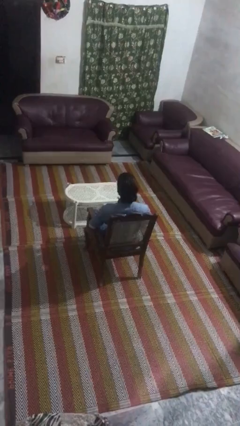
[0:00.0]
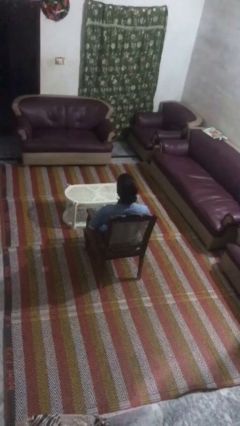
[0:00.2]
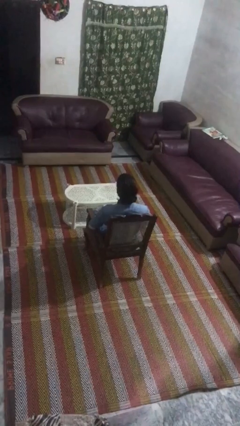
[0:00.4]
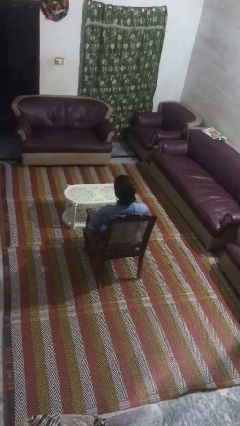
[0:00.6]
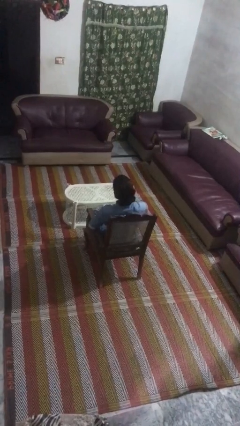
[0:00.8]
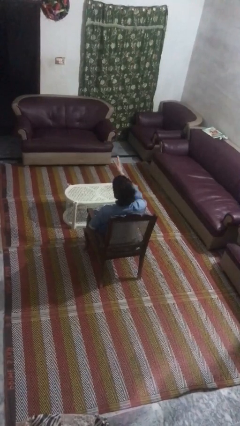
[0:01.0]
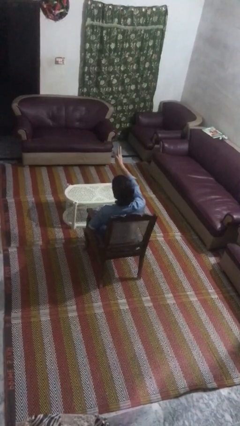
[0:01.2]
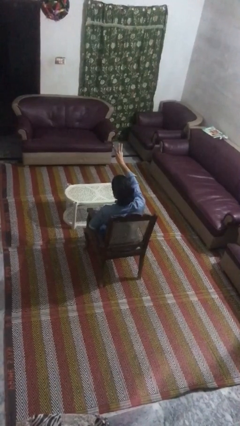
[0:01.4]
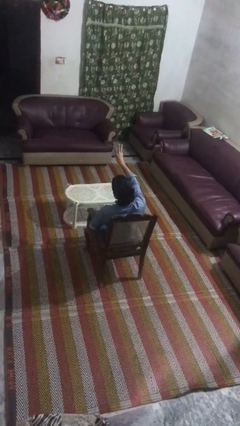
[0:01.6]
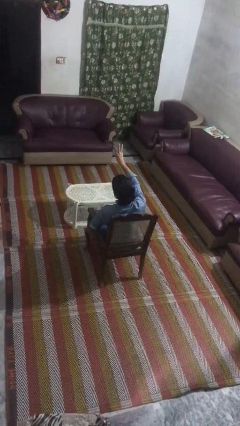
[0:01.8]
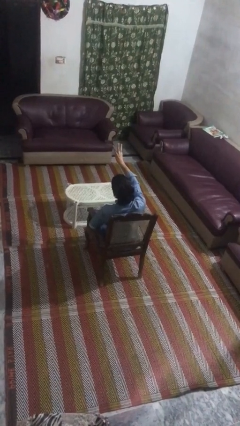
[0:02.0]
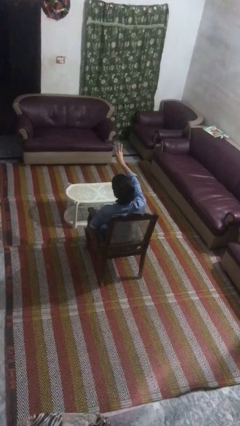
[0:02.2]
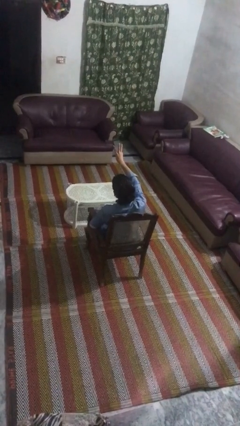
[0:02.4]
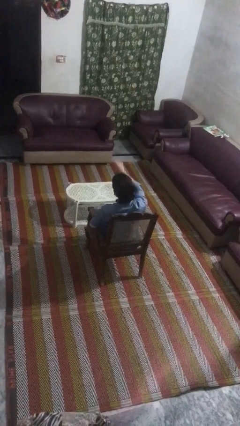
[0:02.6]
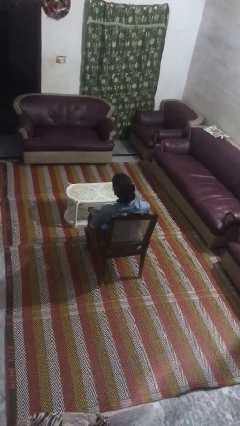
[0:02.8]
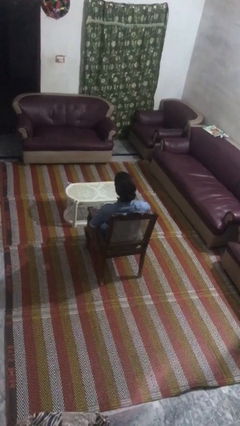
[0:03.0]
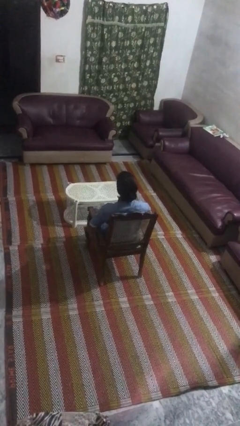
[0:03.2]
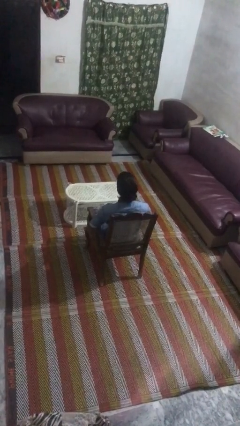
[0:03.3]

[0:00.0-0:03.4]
person gestures number three

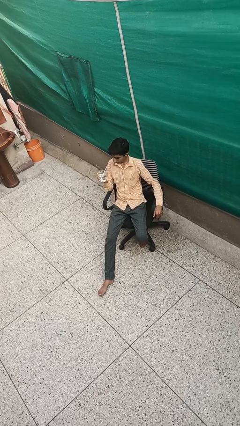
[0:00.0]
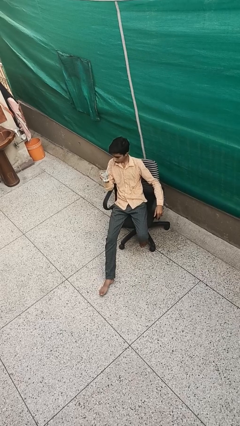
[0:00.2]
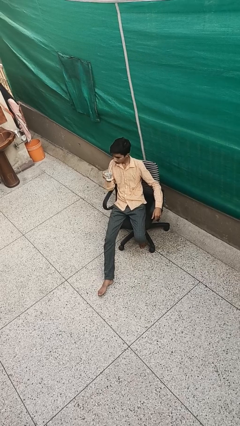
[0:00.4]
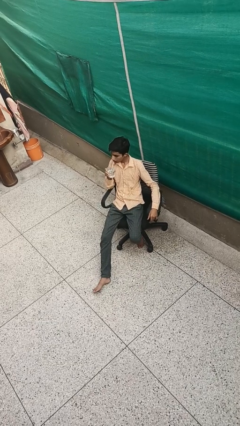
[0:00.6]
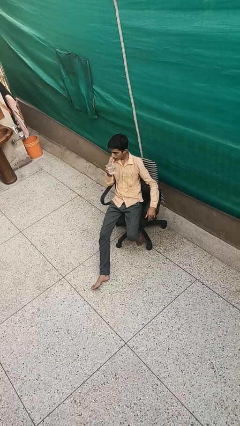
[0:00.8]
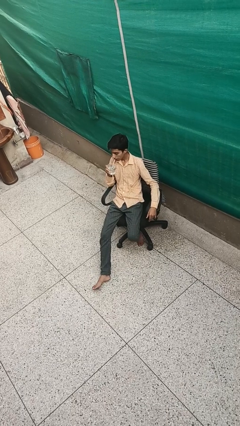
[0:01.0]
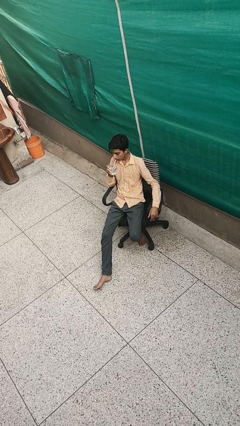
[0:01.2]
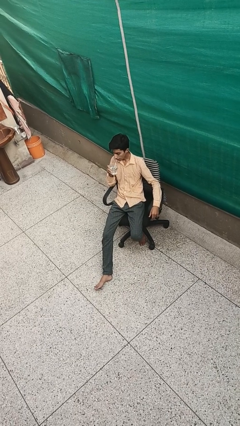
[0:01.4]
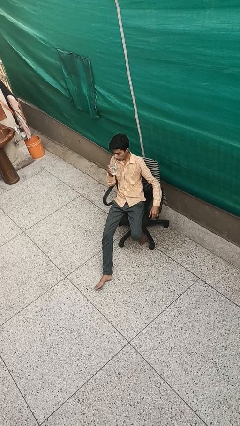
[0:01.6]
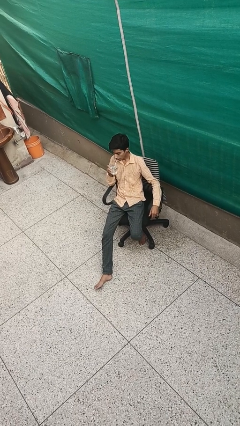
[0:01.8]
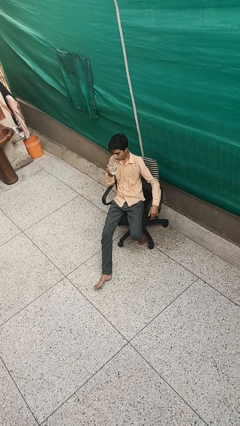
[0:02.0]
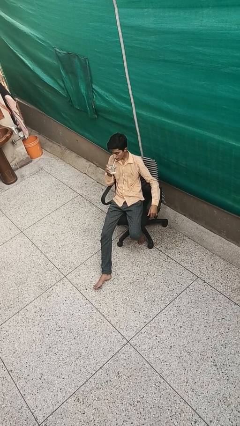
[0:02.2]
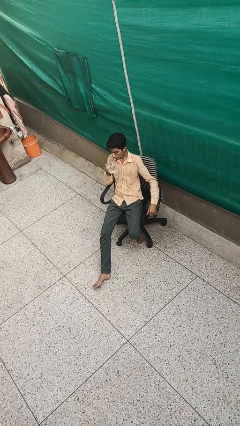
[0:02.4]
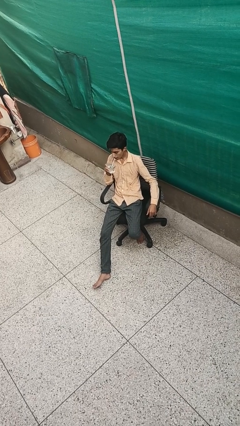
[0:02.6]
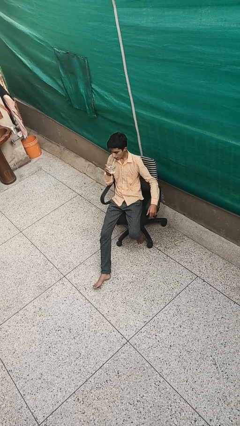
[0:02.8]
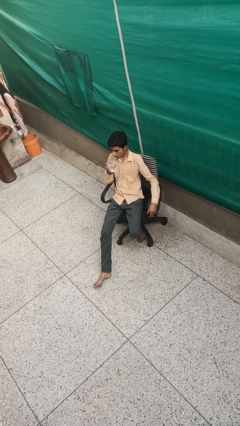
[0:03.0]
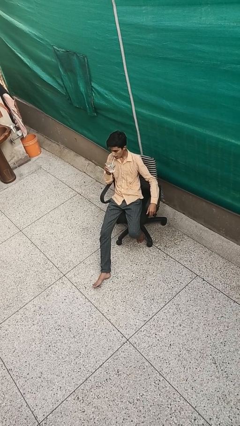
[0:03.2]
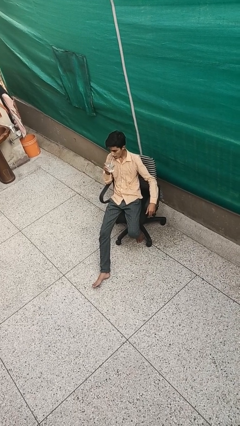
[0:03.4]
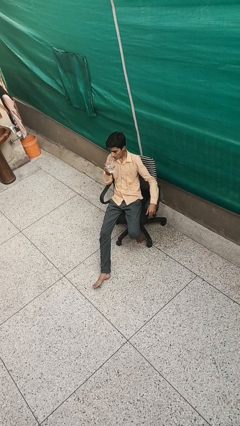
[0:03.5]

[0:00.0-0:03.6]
person drinks from straw

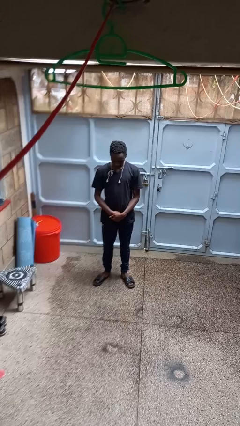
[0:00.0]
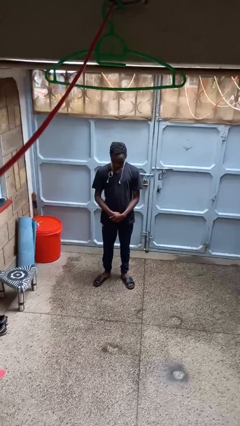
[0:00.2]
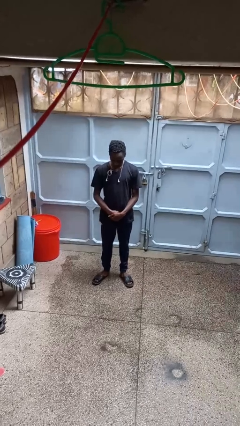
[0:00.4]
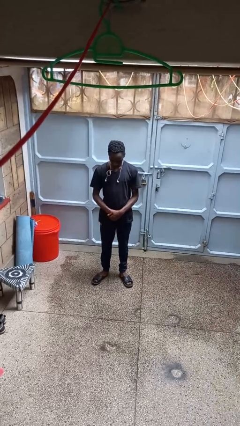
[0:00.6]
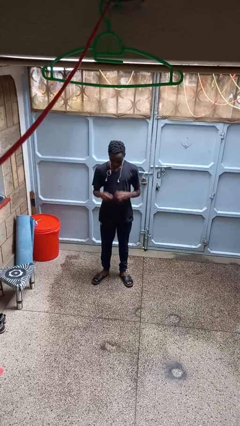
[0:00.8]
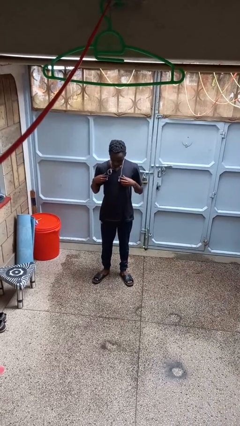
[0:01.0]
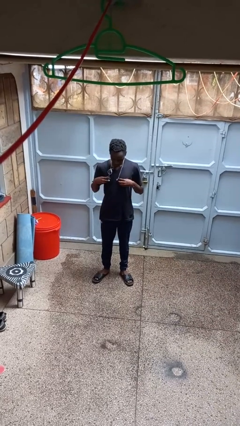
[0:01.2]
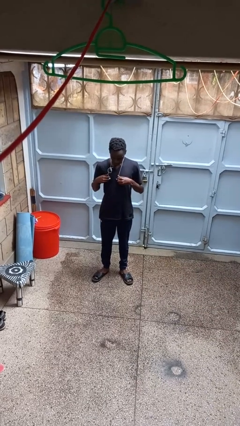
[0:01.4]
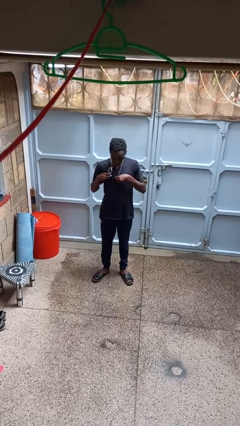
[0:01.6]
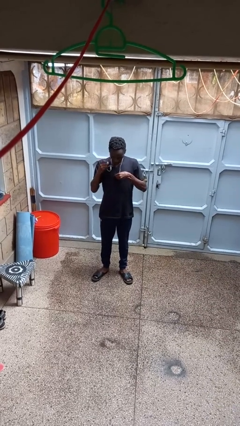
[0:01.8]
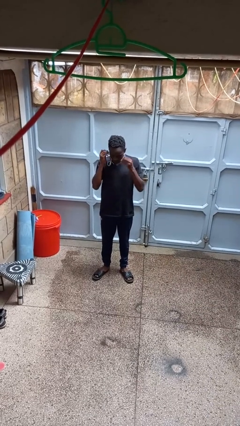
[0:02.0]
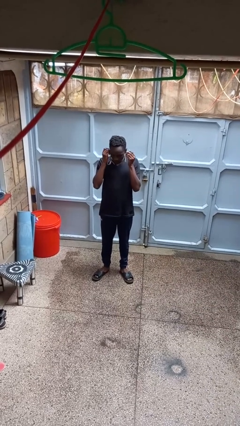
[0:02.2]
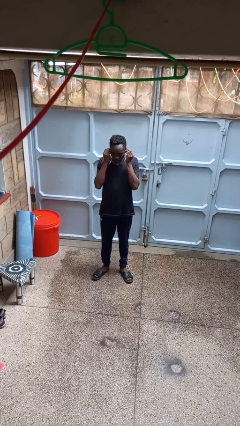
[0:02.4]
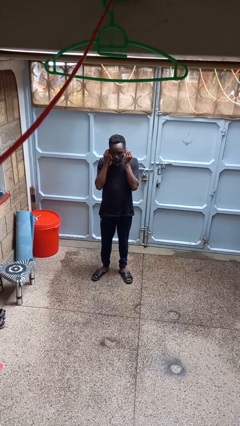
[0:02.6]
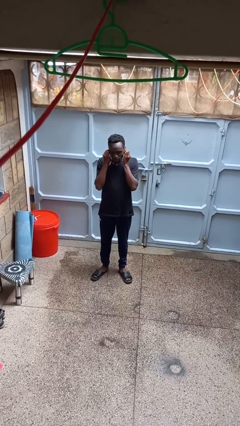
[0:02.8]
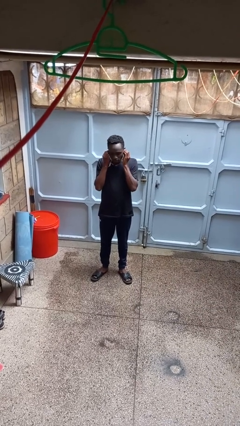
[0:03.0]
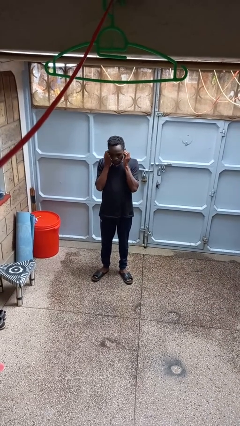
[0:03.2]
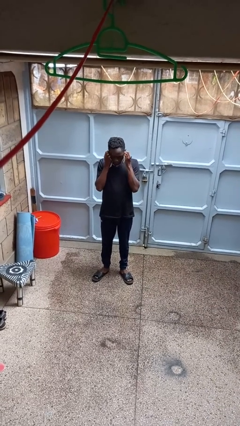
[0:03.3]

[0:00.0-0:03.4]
person puts on headphones

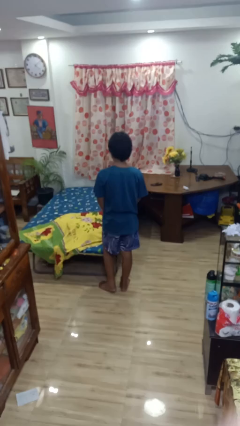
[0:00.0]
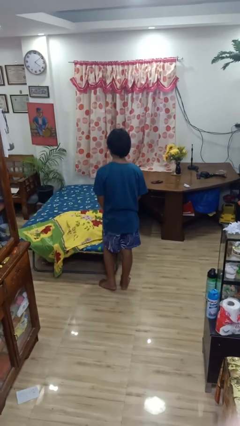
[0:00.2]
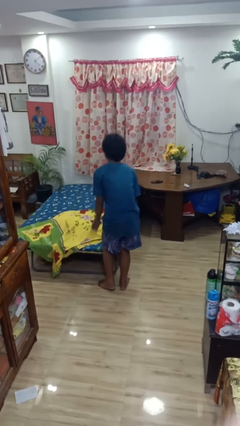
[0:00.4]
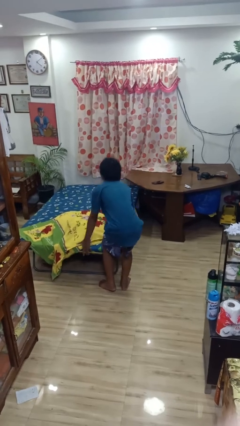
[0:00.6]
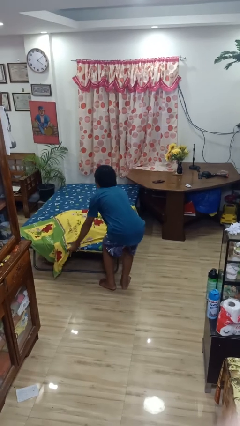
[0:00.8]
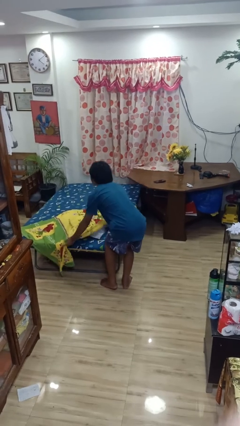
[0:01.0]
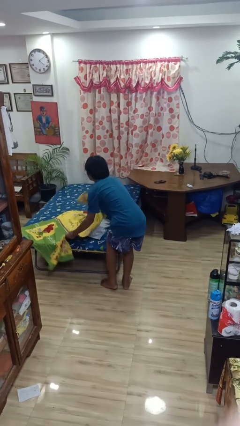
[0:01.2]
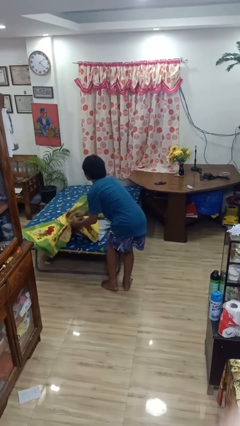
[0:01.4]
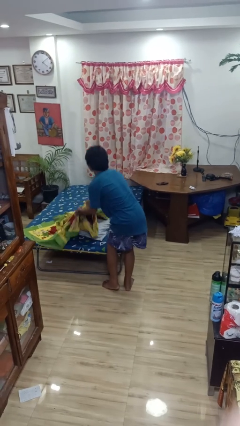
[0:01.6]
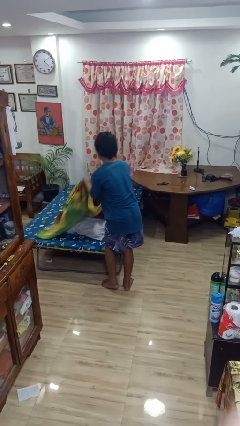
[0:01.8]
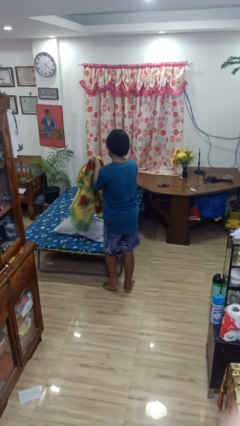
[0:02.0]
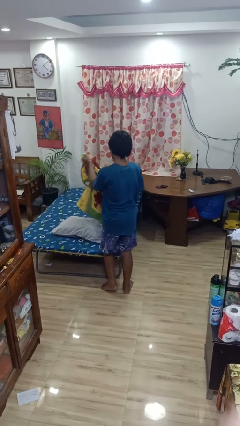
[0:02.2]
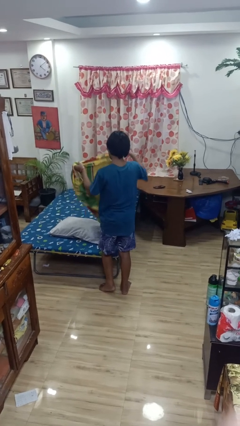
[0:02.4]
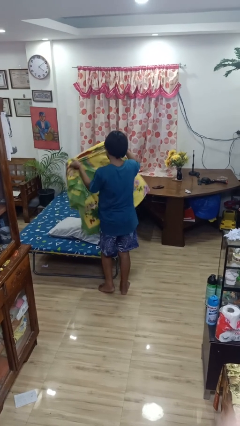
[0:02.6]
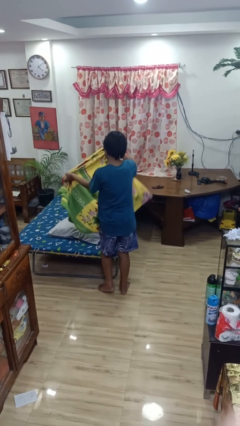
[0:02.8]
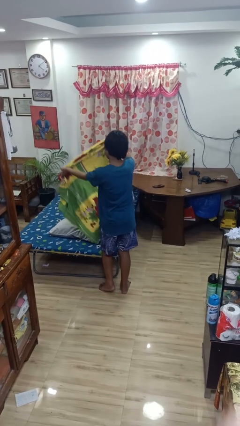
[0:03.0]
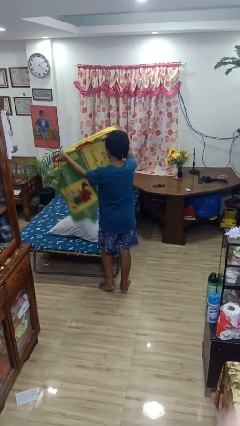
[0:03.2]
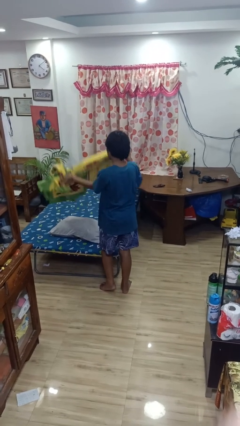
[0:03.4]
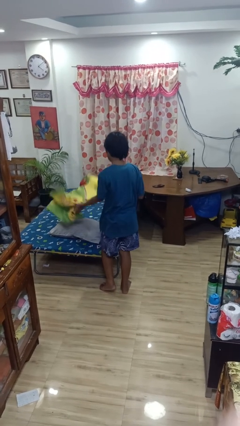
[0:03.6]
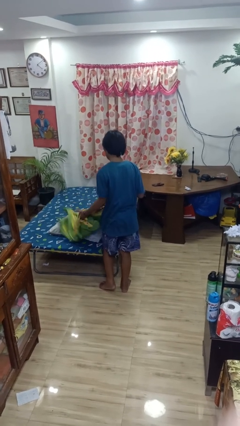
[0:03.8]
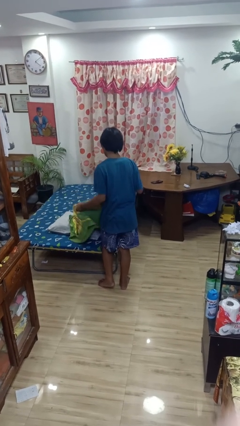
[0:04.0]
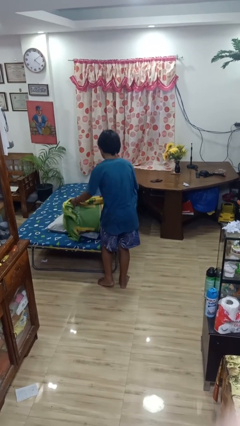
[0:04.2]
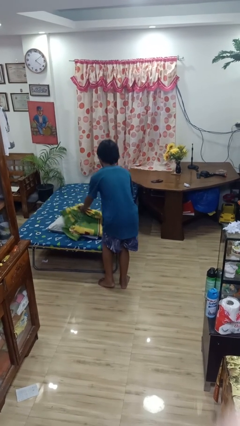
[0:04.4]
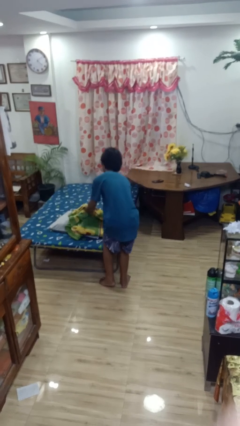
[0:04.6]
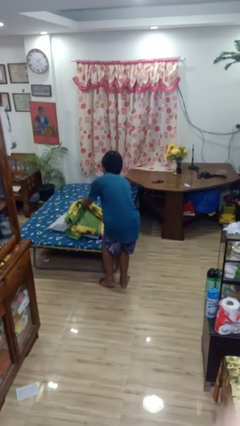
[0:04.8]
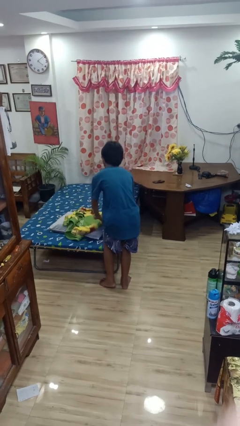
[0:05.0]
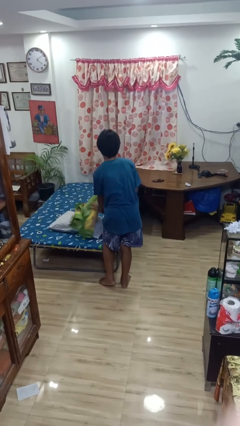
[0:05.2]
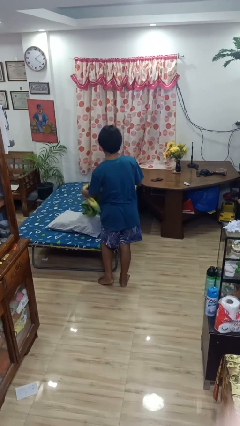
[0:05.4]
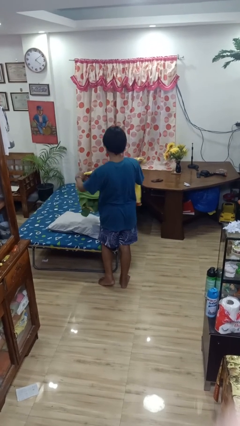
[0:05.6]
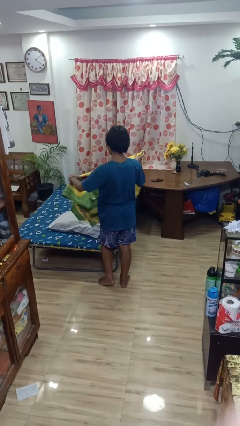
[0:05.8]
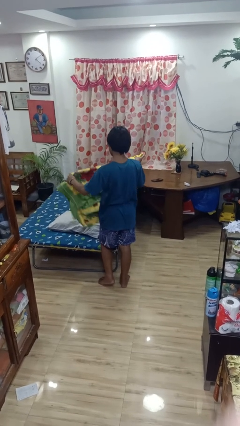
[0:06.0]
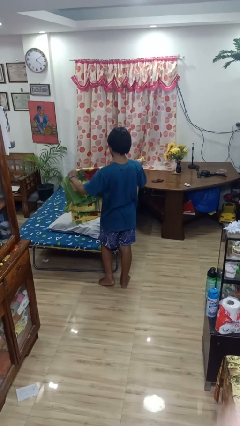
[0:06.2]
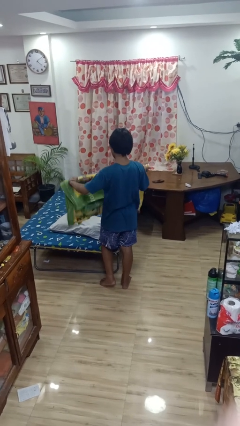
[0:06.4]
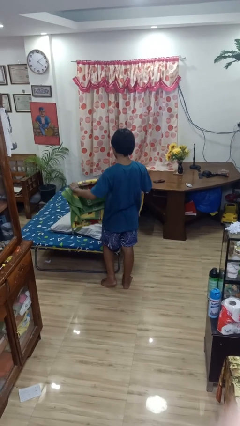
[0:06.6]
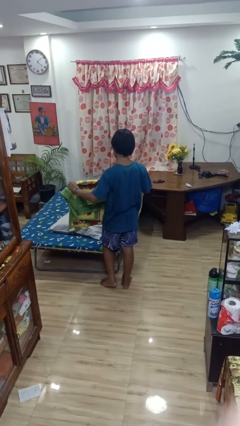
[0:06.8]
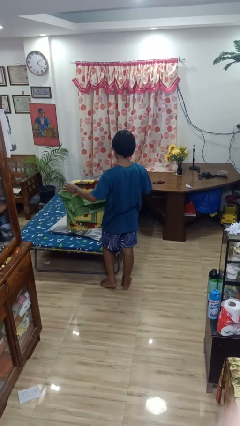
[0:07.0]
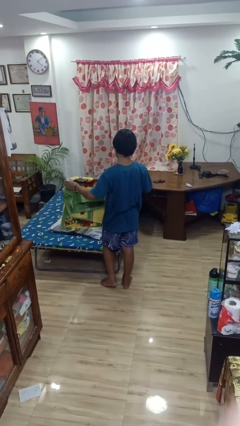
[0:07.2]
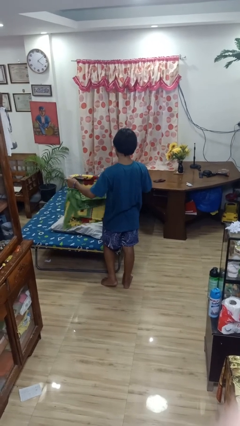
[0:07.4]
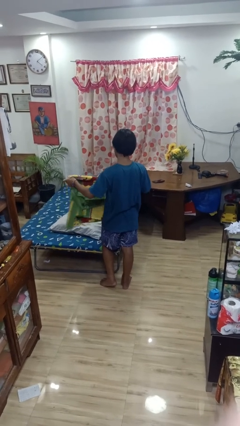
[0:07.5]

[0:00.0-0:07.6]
person folds blanket
